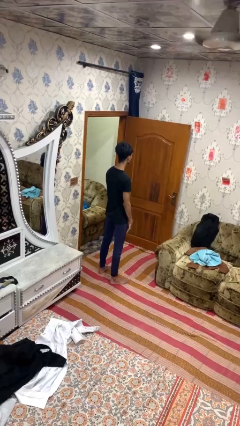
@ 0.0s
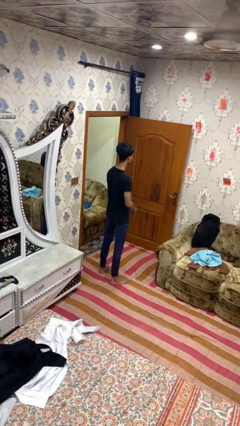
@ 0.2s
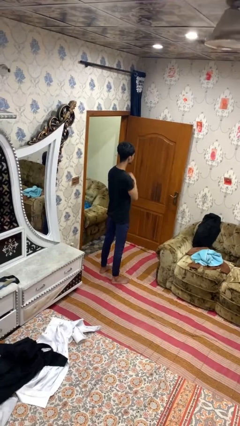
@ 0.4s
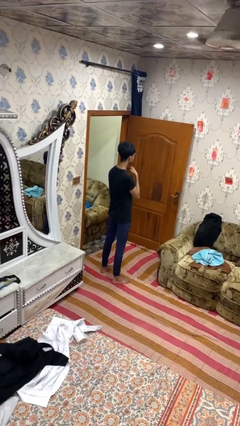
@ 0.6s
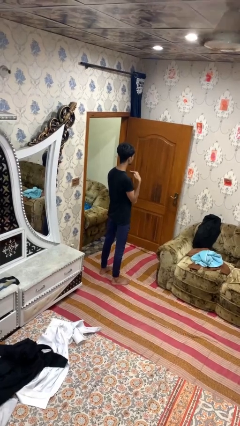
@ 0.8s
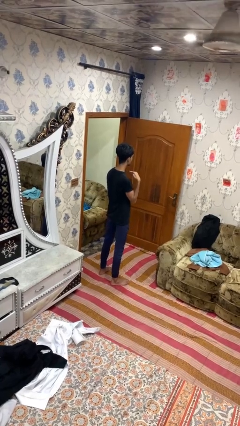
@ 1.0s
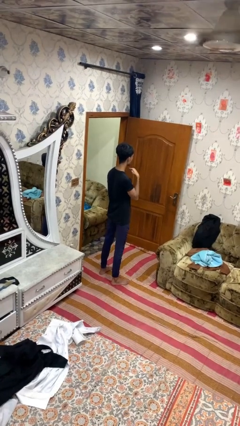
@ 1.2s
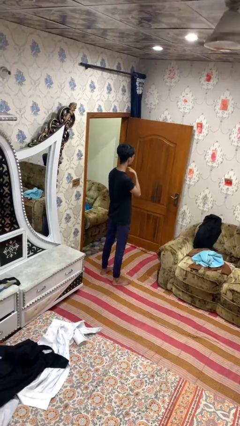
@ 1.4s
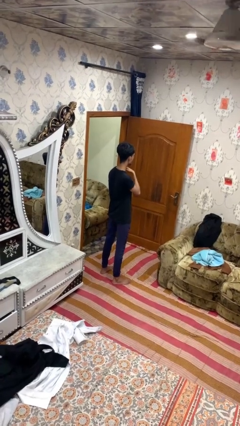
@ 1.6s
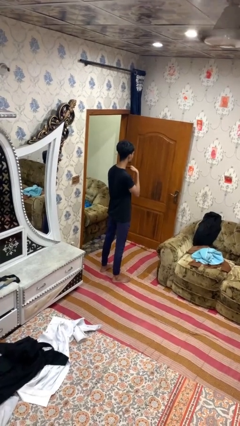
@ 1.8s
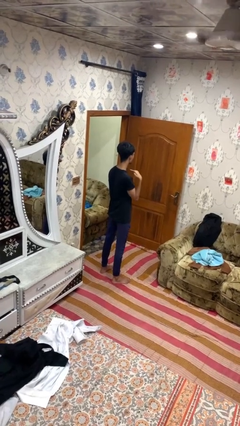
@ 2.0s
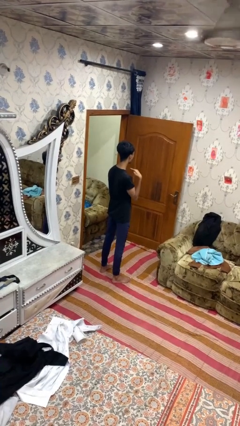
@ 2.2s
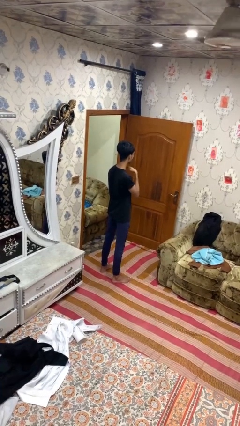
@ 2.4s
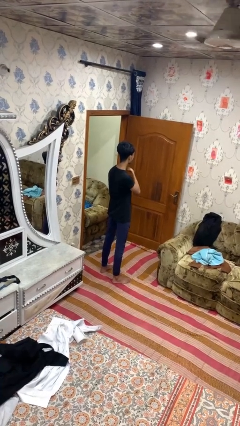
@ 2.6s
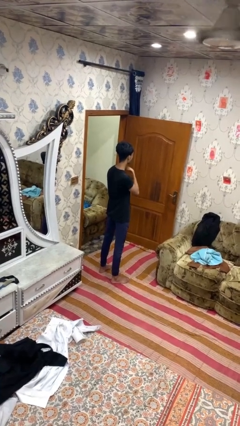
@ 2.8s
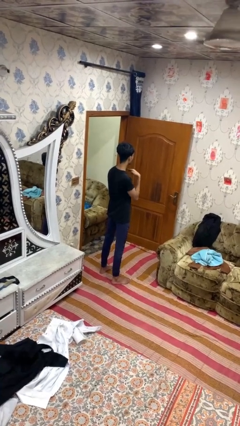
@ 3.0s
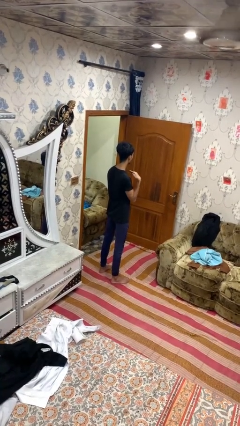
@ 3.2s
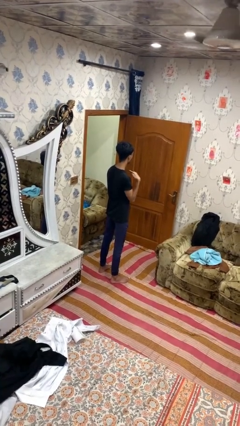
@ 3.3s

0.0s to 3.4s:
person gestures cut

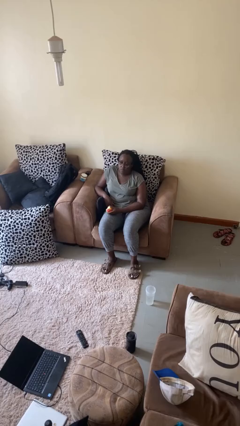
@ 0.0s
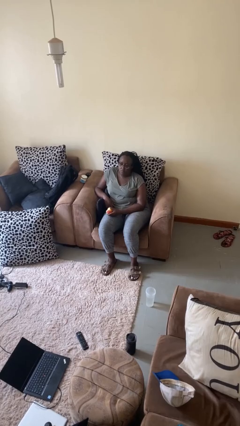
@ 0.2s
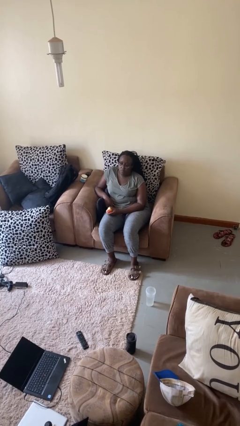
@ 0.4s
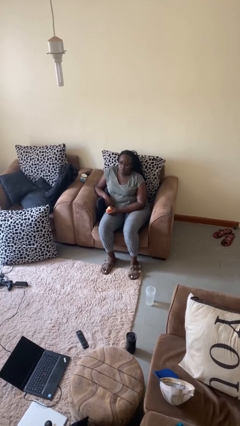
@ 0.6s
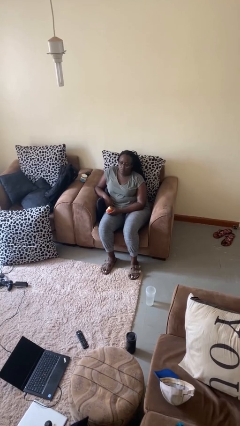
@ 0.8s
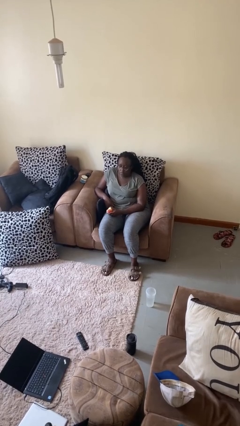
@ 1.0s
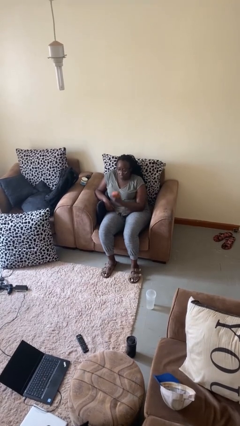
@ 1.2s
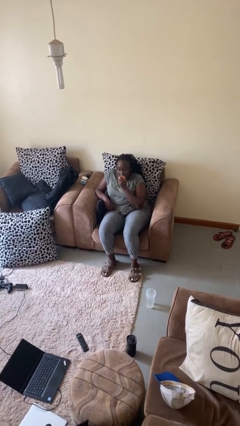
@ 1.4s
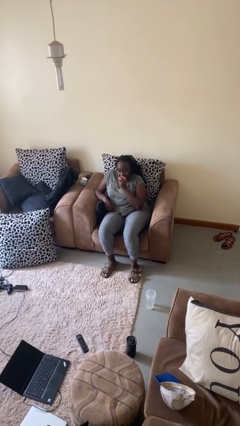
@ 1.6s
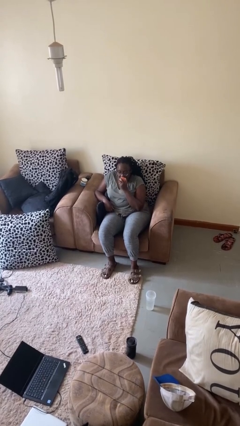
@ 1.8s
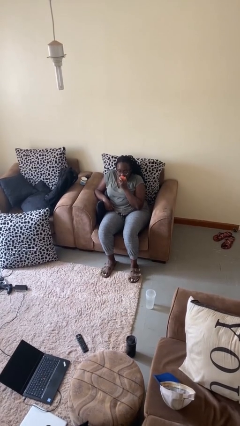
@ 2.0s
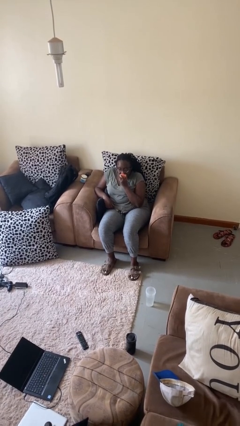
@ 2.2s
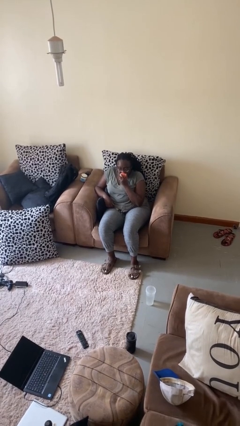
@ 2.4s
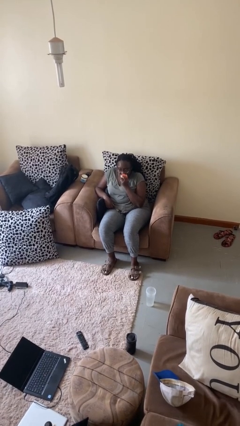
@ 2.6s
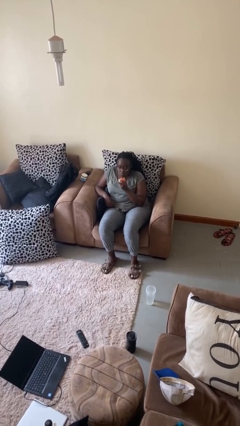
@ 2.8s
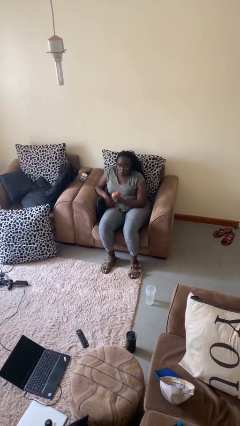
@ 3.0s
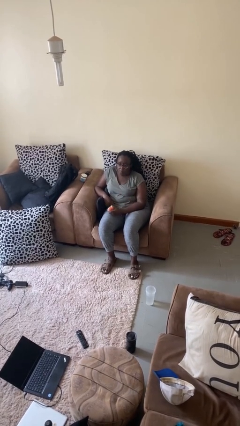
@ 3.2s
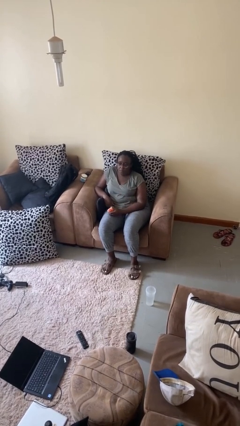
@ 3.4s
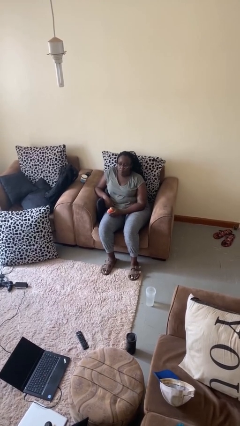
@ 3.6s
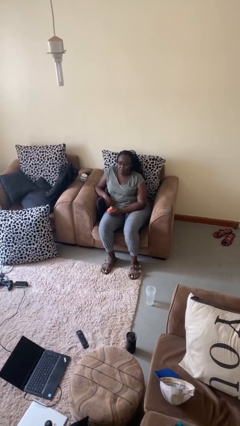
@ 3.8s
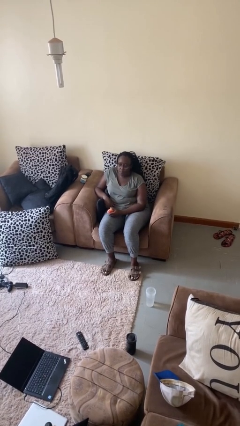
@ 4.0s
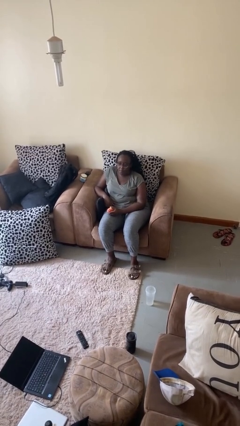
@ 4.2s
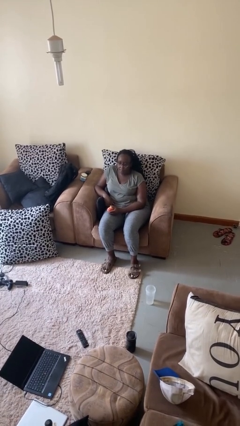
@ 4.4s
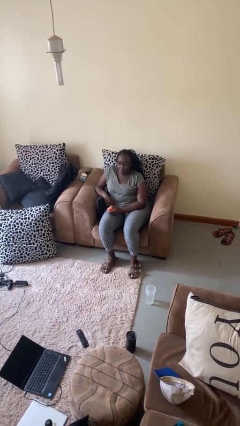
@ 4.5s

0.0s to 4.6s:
person eats apple

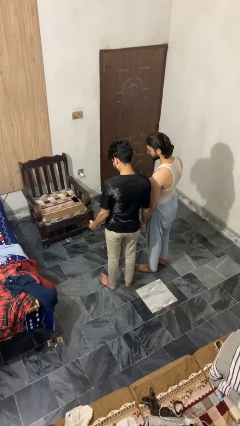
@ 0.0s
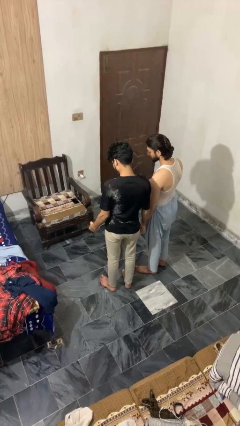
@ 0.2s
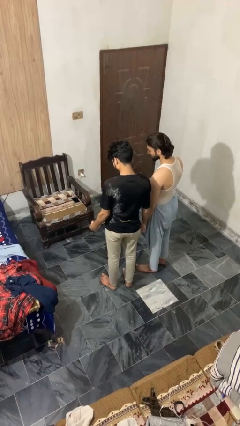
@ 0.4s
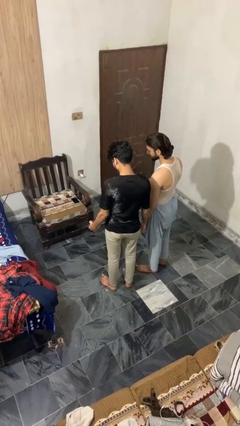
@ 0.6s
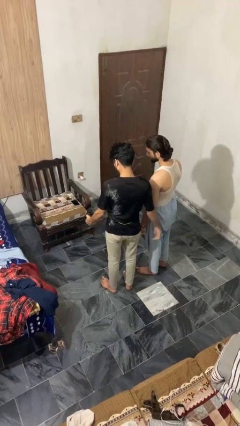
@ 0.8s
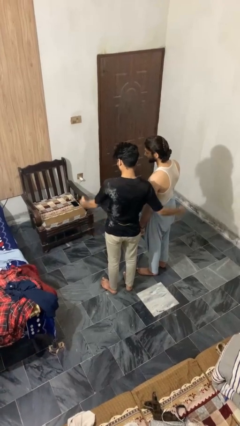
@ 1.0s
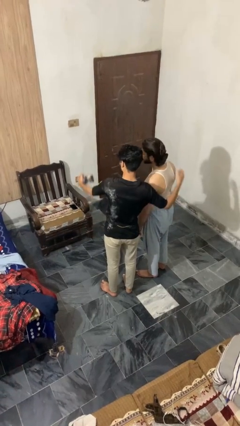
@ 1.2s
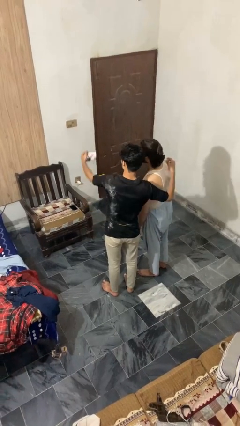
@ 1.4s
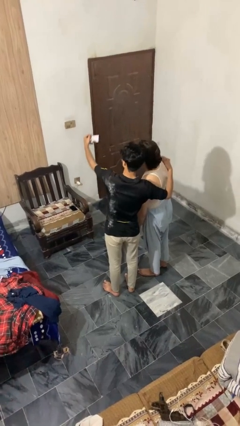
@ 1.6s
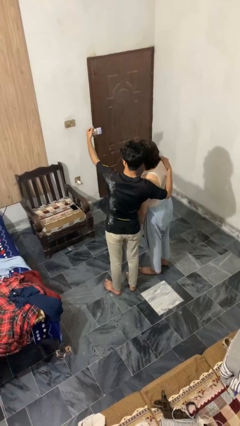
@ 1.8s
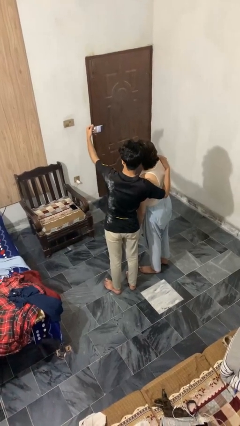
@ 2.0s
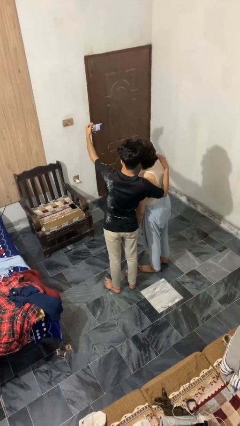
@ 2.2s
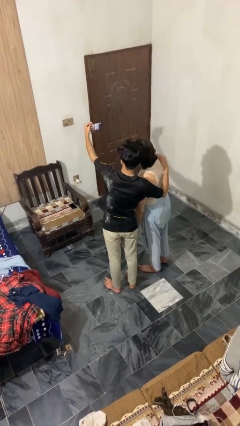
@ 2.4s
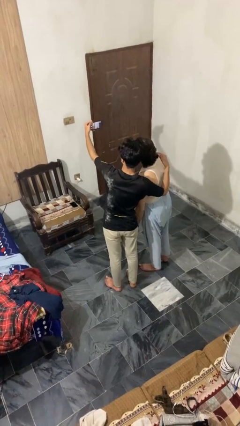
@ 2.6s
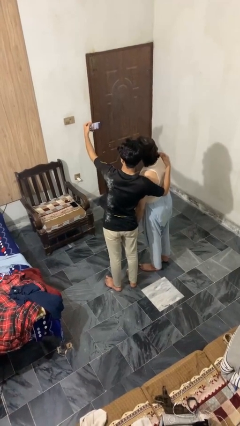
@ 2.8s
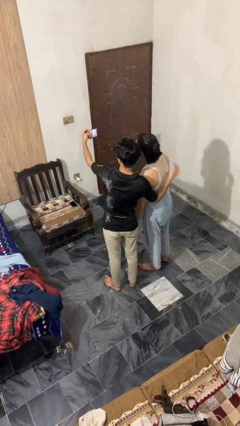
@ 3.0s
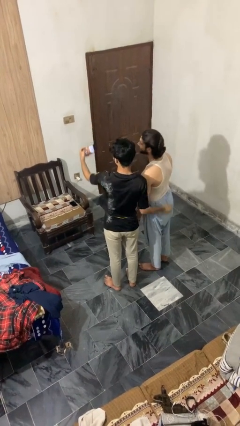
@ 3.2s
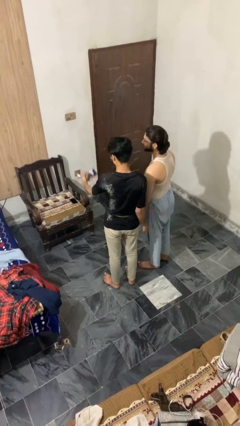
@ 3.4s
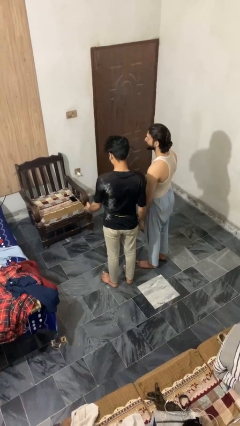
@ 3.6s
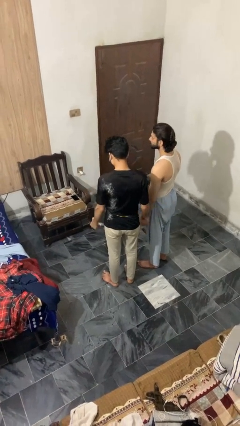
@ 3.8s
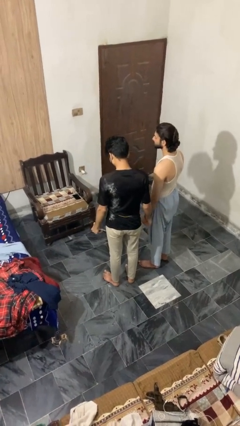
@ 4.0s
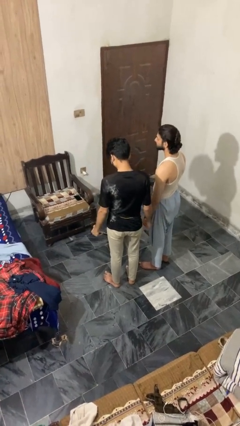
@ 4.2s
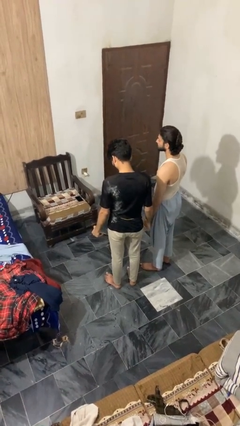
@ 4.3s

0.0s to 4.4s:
person takes selfie with person

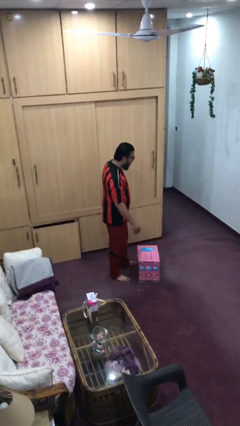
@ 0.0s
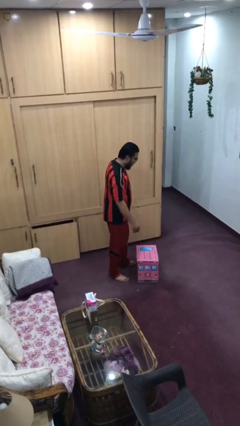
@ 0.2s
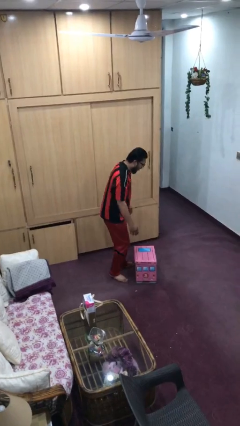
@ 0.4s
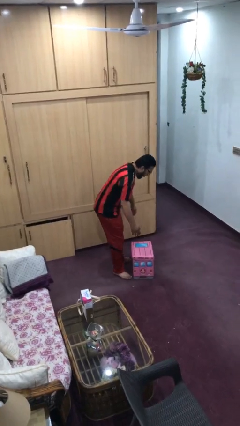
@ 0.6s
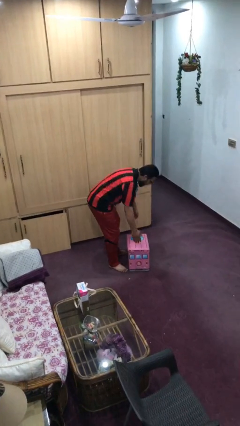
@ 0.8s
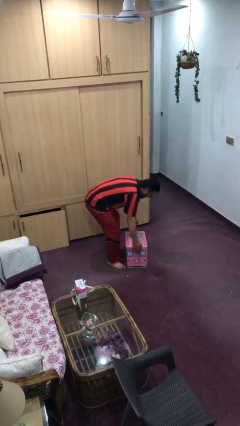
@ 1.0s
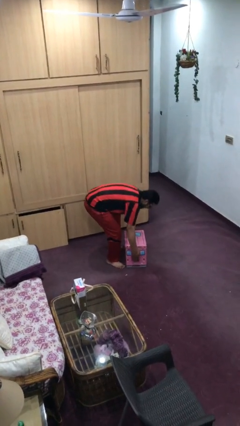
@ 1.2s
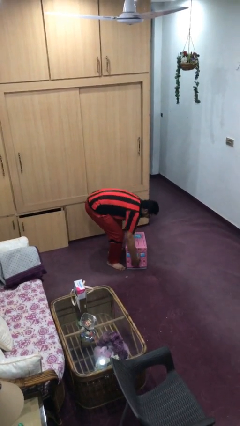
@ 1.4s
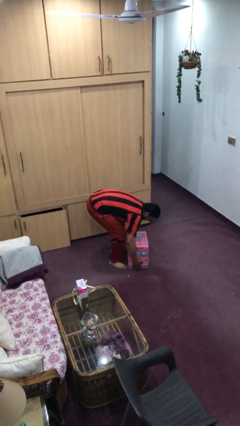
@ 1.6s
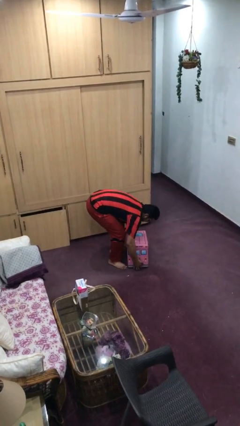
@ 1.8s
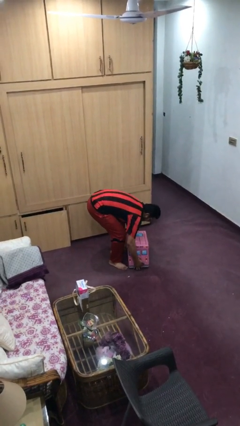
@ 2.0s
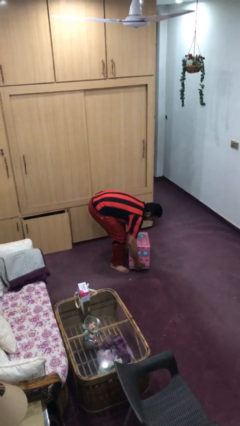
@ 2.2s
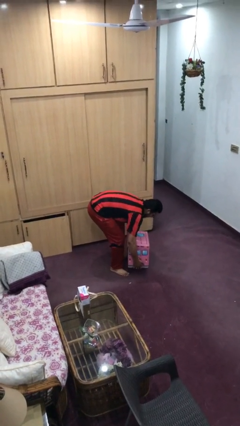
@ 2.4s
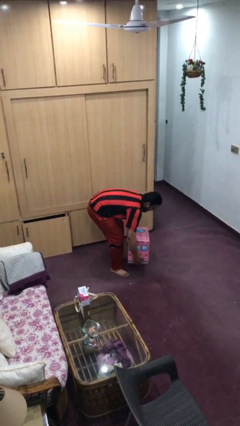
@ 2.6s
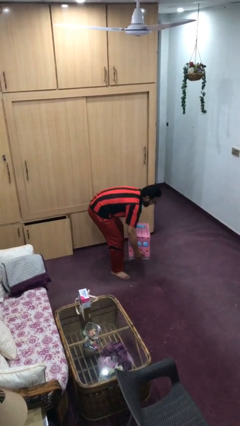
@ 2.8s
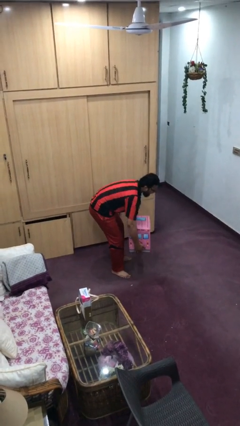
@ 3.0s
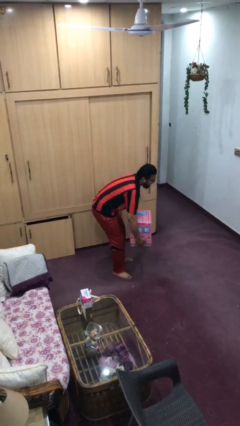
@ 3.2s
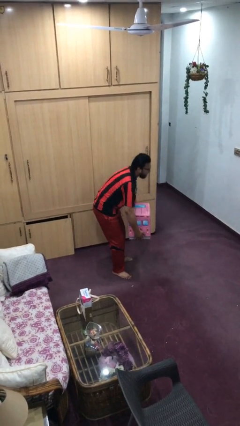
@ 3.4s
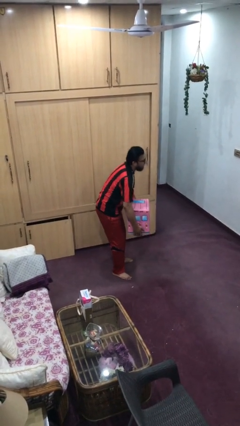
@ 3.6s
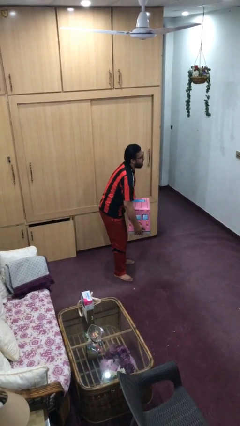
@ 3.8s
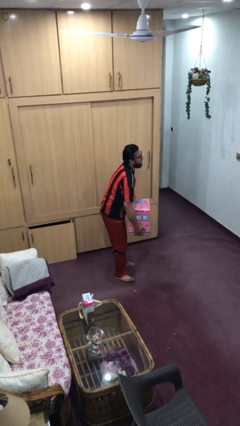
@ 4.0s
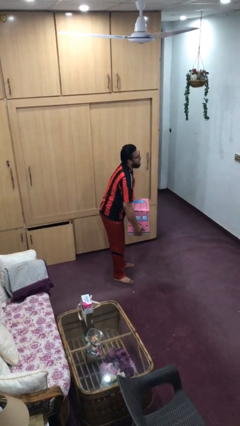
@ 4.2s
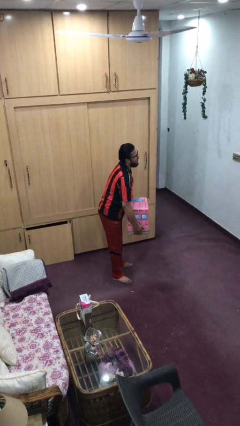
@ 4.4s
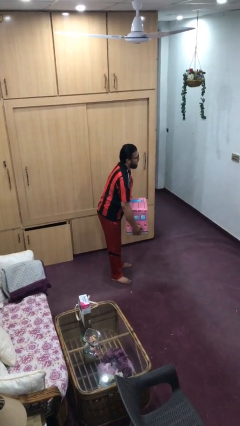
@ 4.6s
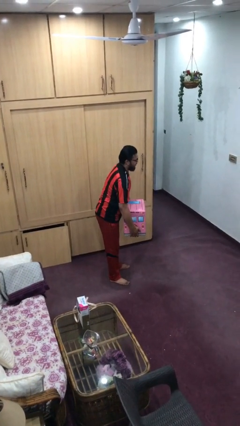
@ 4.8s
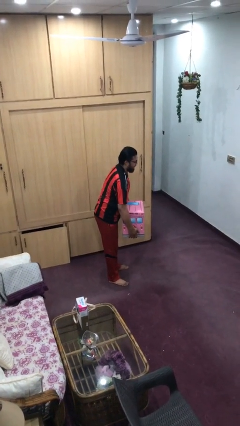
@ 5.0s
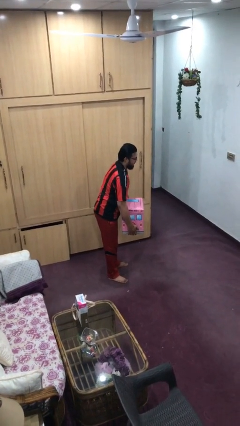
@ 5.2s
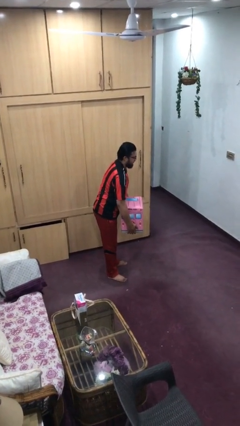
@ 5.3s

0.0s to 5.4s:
person picks up object from floor
